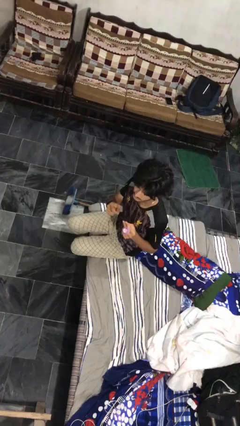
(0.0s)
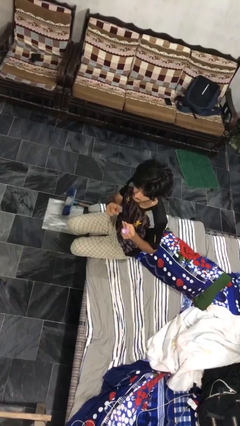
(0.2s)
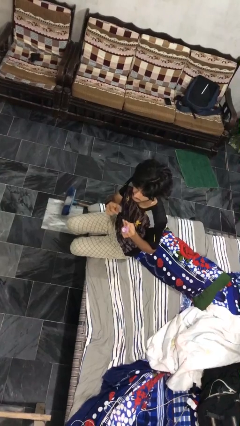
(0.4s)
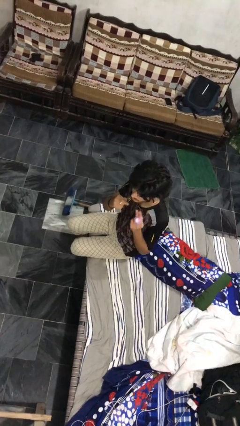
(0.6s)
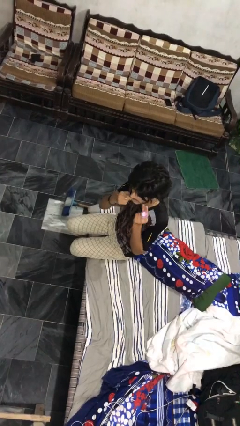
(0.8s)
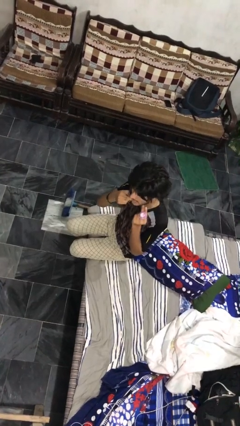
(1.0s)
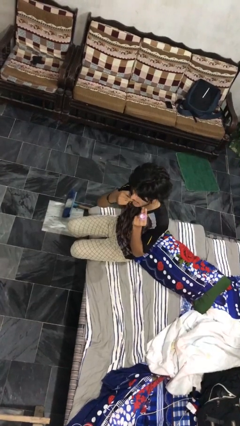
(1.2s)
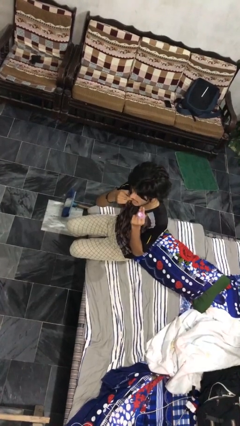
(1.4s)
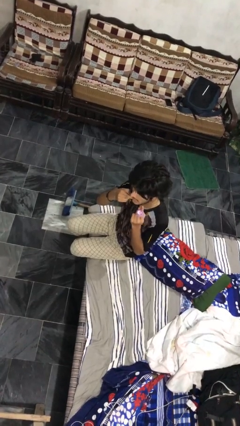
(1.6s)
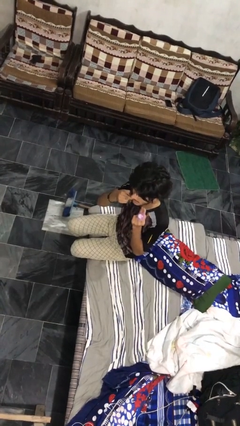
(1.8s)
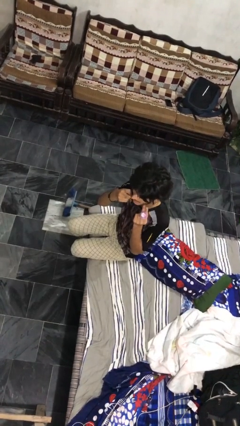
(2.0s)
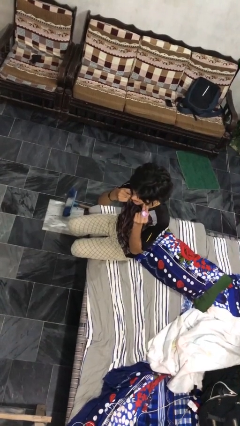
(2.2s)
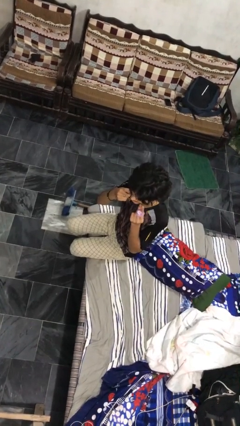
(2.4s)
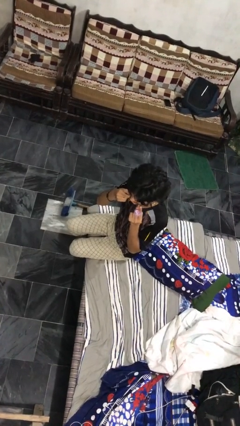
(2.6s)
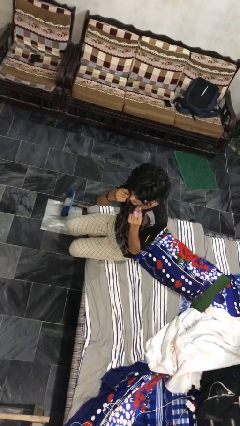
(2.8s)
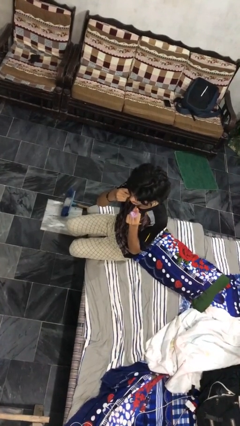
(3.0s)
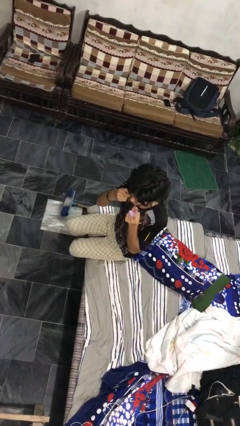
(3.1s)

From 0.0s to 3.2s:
person flosses

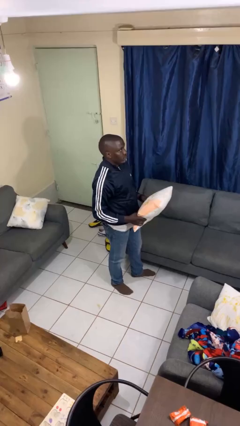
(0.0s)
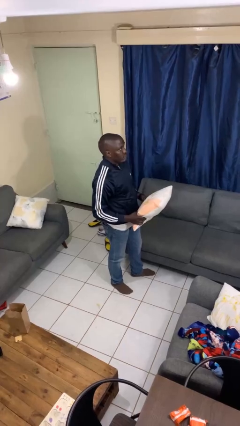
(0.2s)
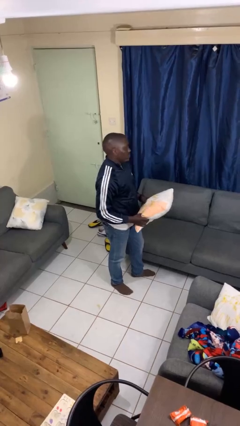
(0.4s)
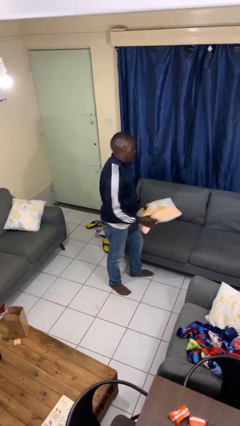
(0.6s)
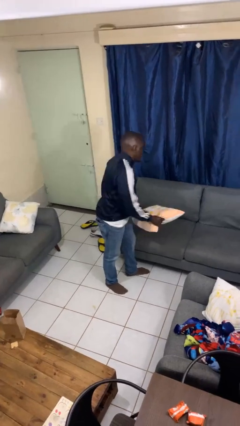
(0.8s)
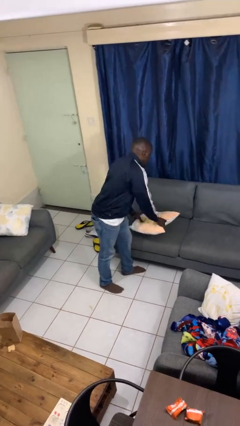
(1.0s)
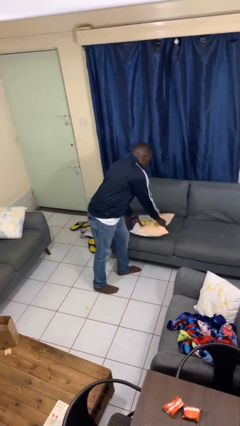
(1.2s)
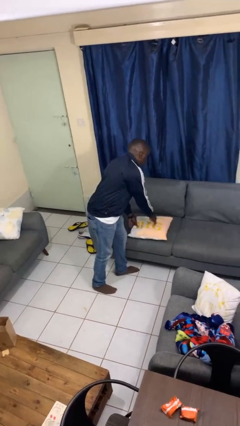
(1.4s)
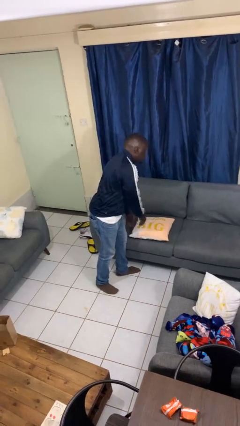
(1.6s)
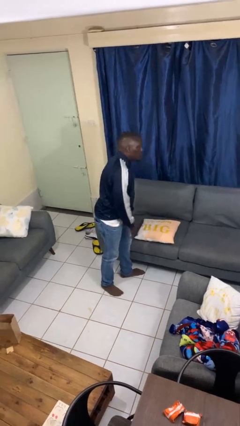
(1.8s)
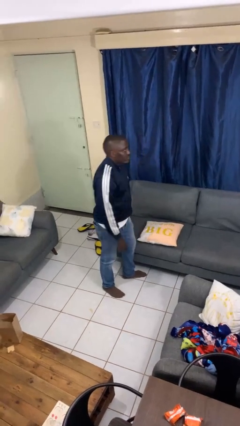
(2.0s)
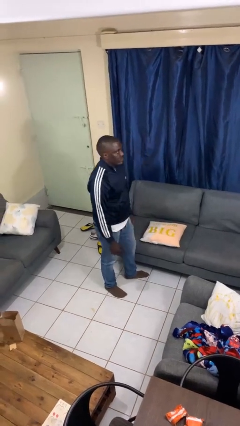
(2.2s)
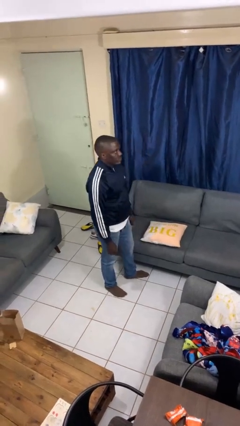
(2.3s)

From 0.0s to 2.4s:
person puts down object on couch

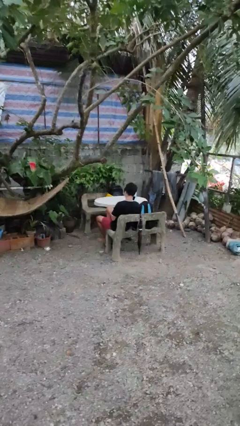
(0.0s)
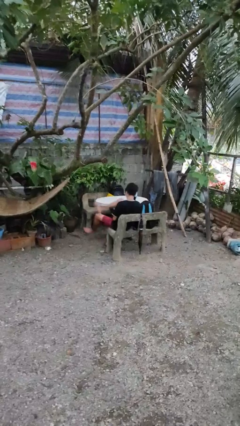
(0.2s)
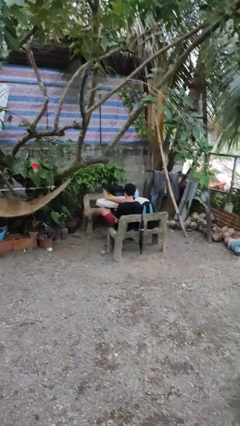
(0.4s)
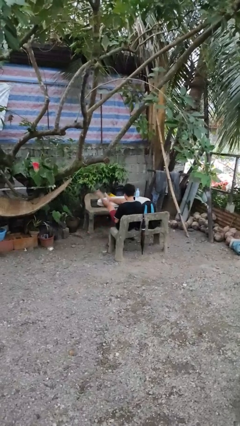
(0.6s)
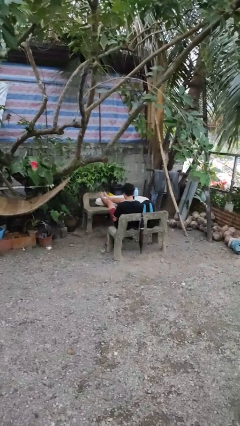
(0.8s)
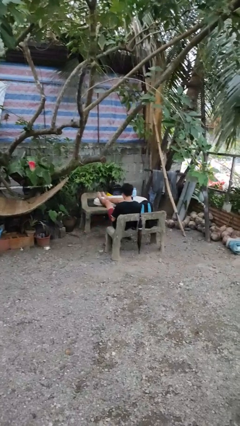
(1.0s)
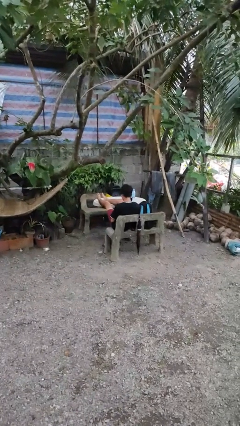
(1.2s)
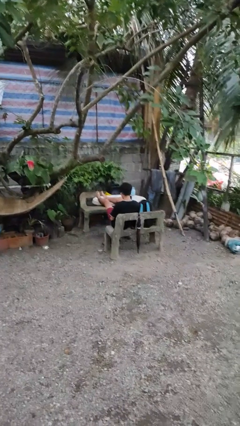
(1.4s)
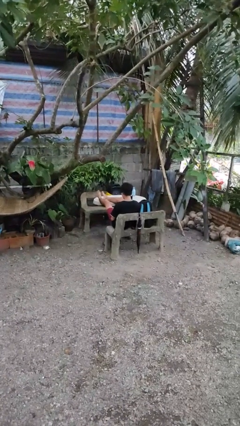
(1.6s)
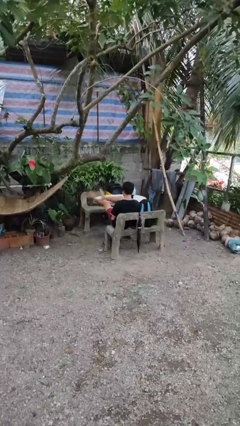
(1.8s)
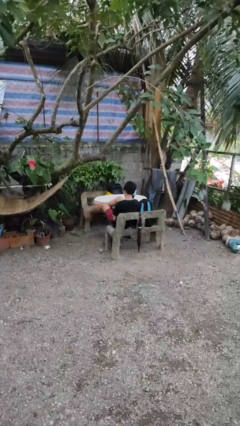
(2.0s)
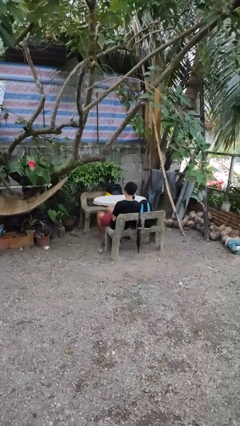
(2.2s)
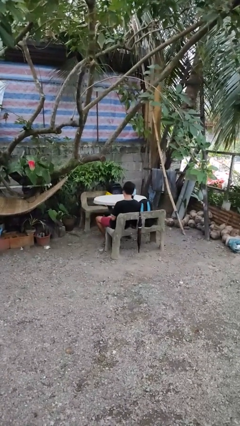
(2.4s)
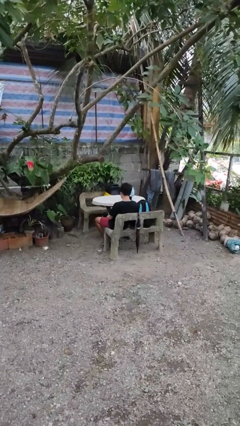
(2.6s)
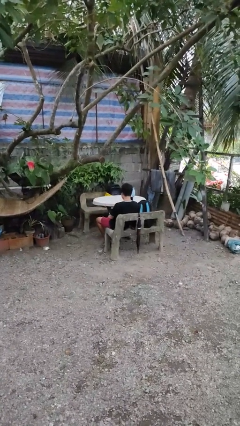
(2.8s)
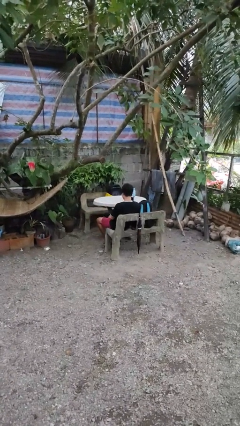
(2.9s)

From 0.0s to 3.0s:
person puts feet up

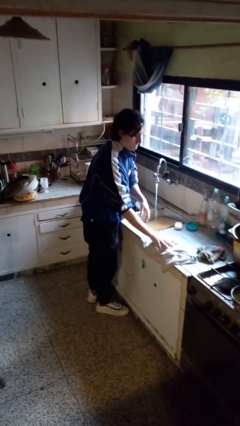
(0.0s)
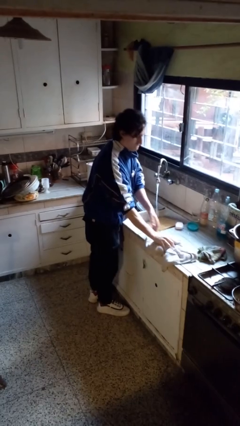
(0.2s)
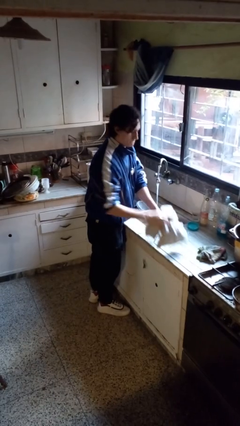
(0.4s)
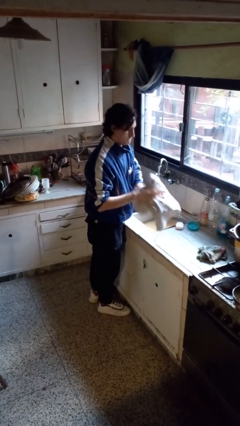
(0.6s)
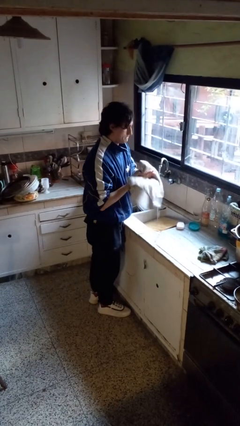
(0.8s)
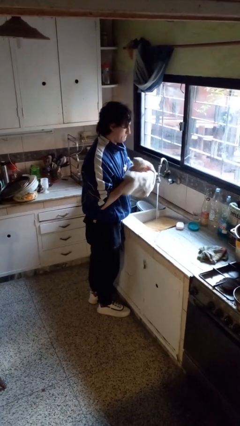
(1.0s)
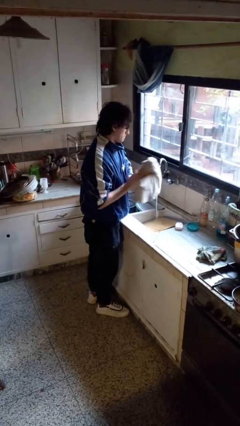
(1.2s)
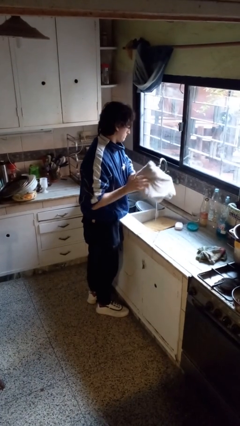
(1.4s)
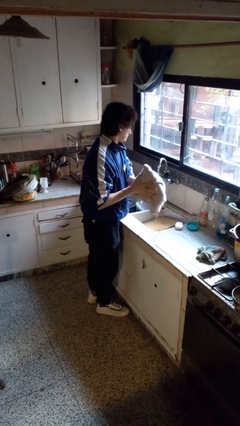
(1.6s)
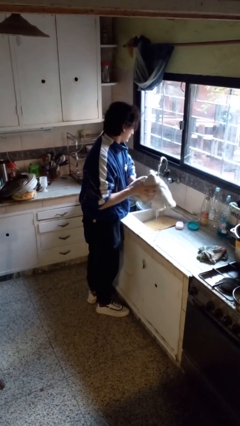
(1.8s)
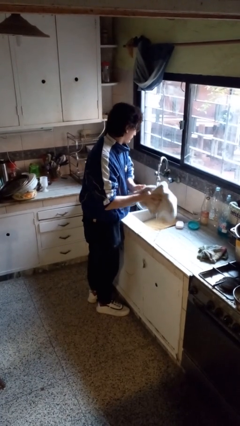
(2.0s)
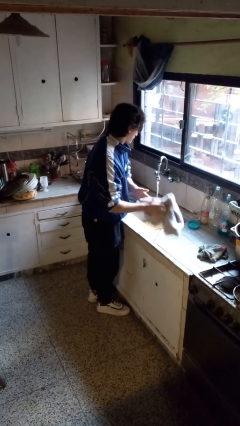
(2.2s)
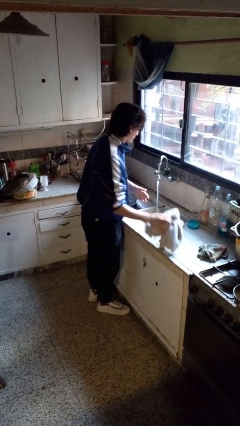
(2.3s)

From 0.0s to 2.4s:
person dries hands with towel

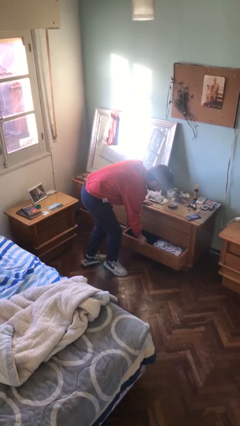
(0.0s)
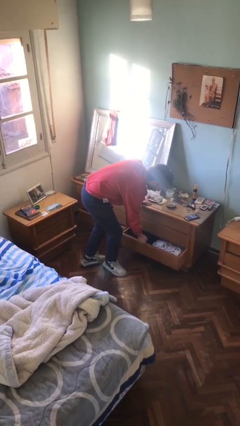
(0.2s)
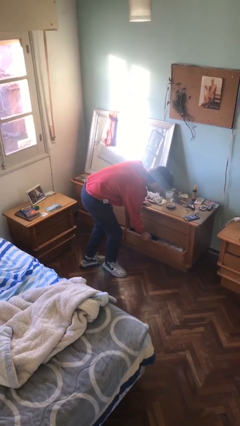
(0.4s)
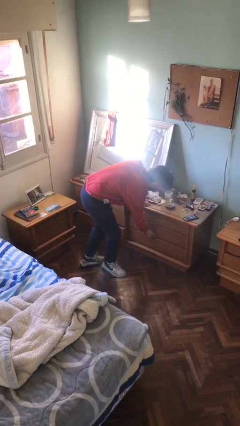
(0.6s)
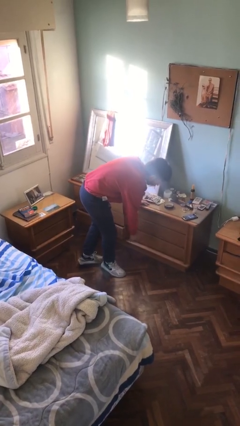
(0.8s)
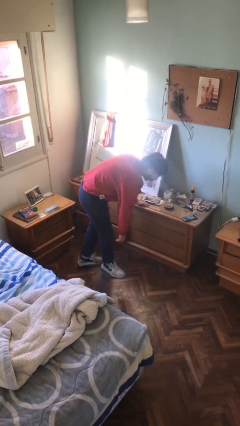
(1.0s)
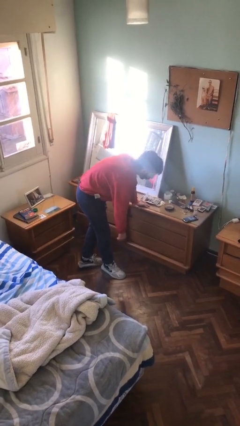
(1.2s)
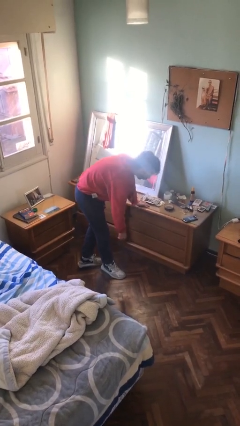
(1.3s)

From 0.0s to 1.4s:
person closes dresser drawer

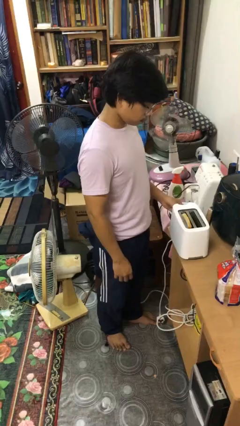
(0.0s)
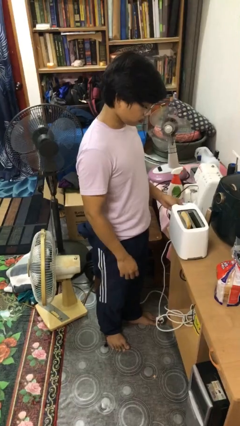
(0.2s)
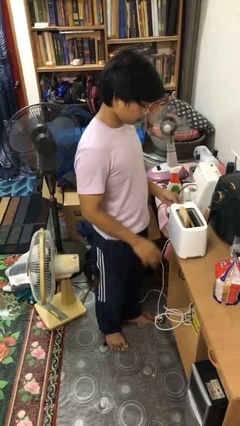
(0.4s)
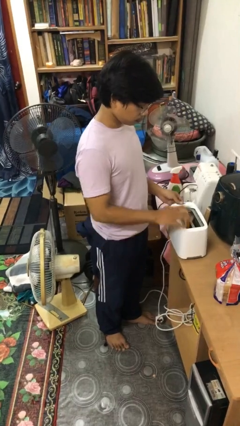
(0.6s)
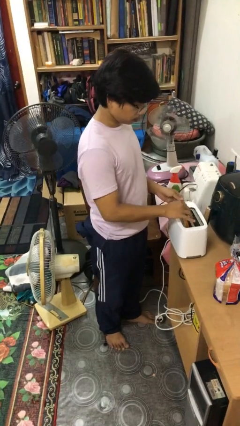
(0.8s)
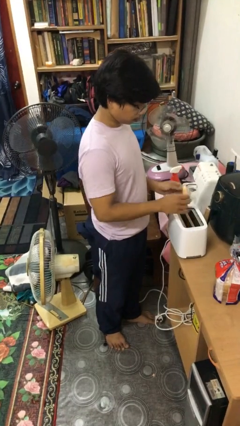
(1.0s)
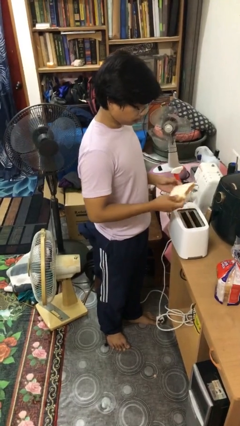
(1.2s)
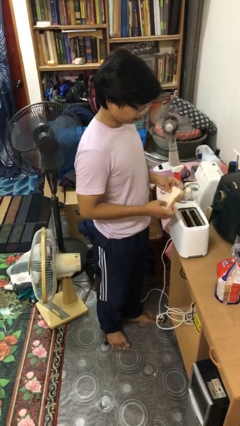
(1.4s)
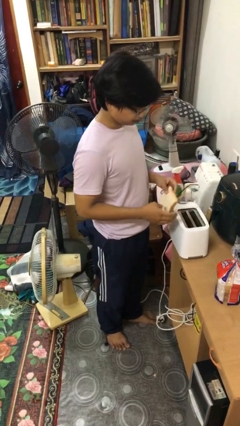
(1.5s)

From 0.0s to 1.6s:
person takes object from toaster

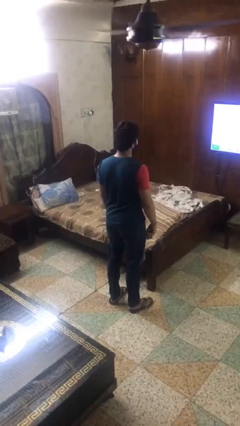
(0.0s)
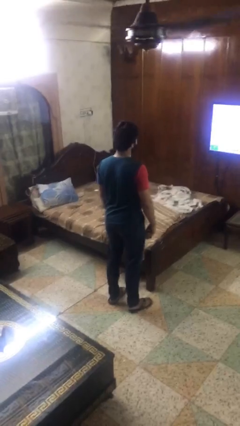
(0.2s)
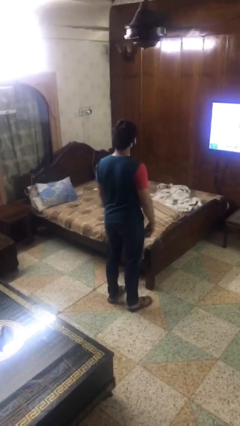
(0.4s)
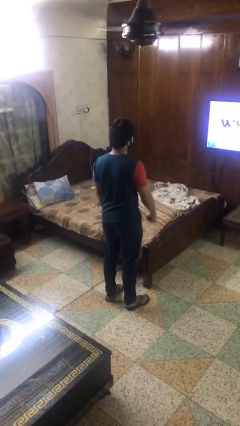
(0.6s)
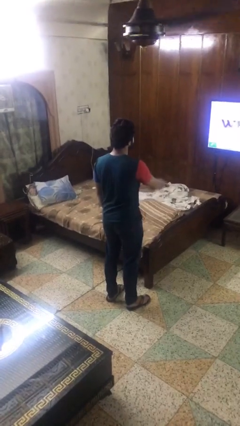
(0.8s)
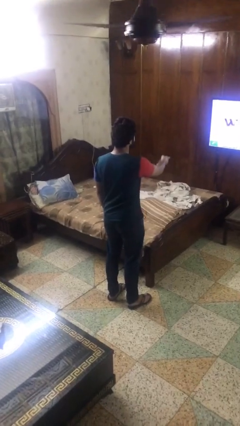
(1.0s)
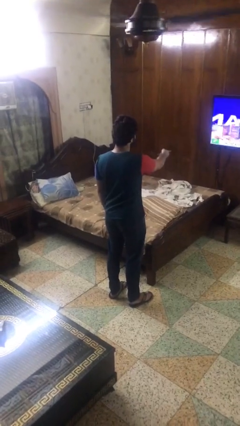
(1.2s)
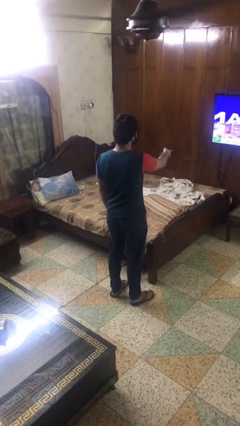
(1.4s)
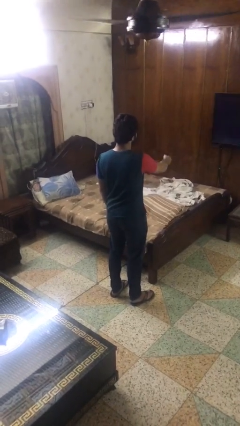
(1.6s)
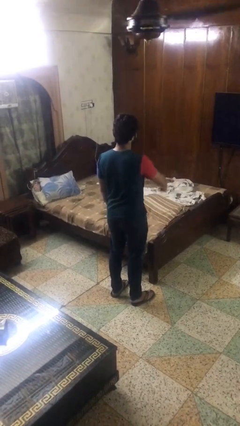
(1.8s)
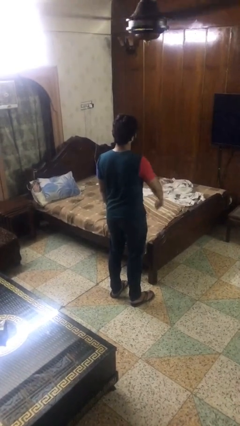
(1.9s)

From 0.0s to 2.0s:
person uses television remote

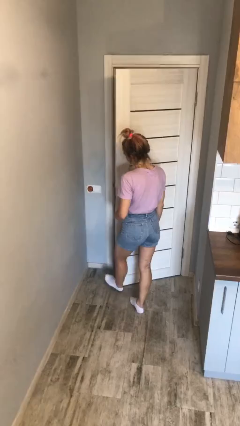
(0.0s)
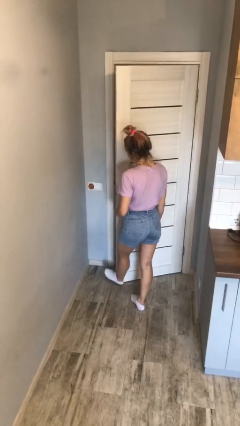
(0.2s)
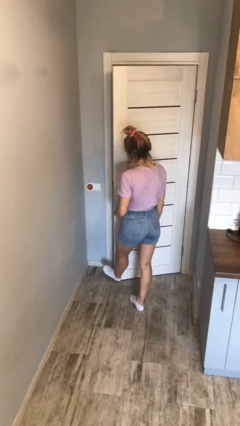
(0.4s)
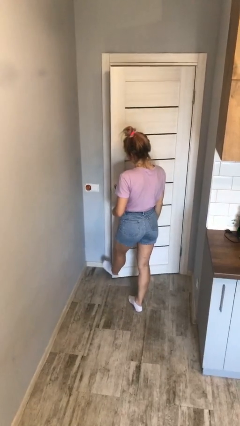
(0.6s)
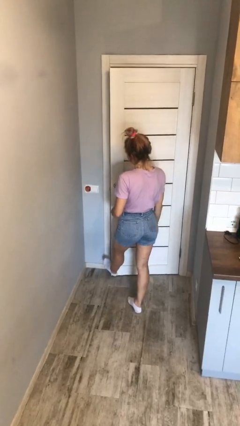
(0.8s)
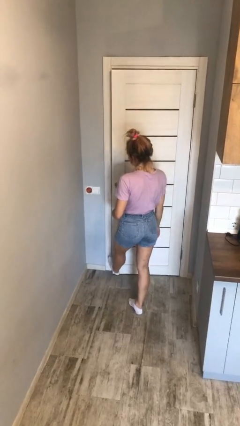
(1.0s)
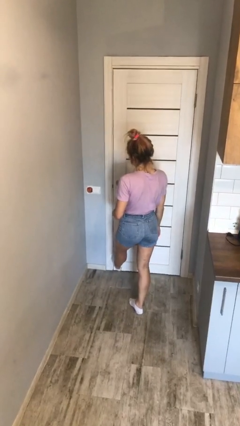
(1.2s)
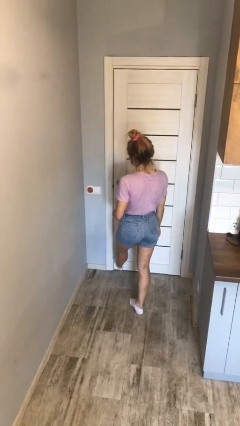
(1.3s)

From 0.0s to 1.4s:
person closes door with foot
